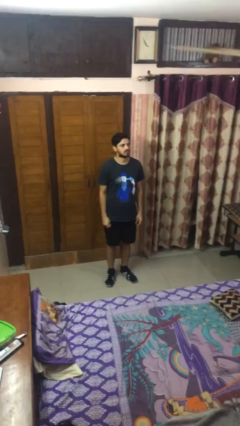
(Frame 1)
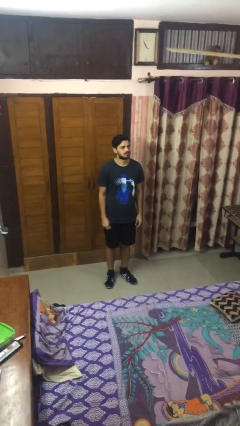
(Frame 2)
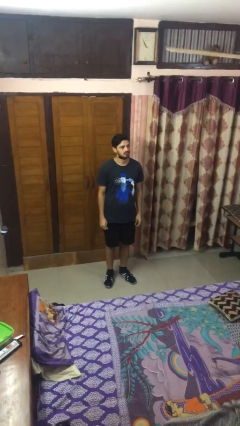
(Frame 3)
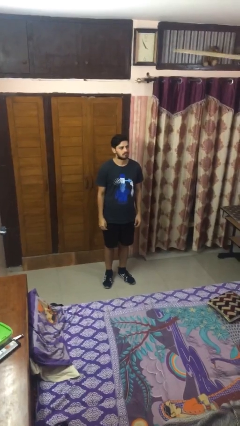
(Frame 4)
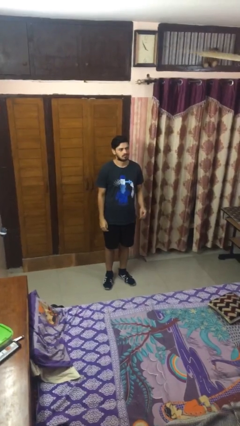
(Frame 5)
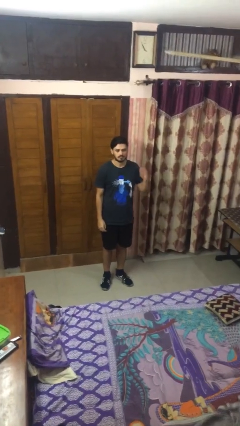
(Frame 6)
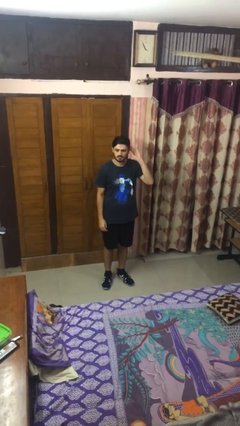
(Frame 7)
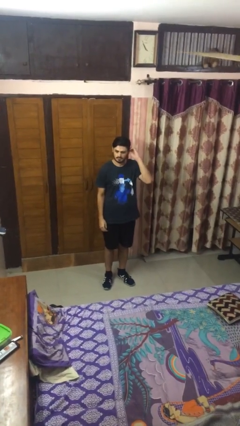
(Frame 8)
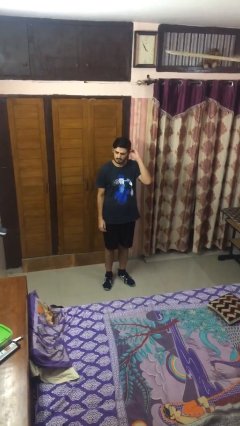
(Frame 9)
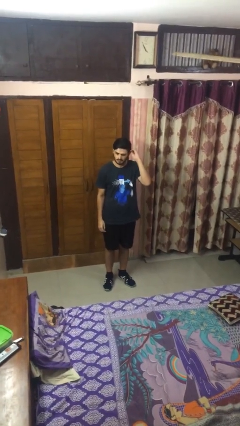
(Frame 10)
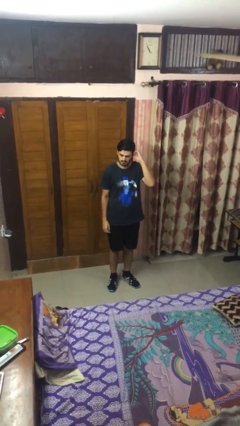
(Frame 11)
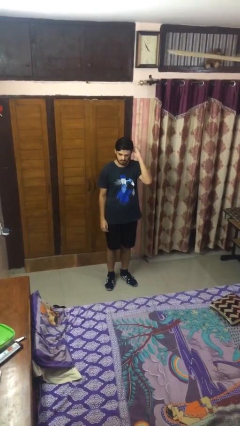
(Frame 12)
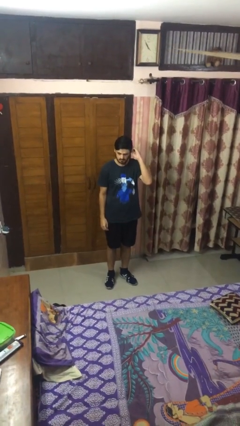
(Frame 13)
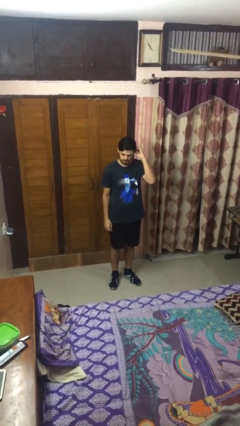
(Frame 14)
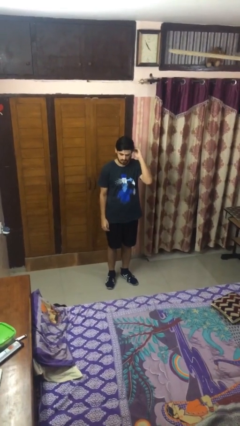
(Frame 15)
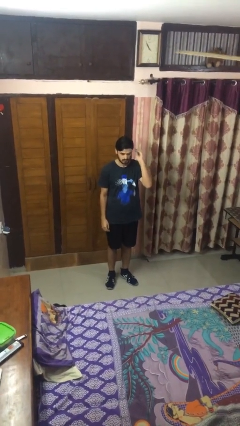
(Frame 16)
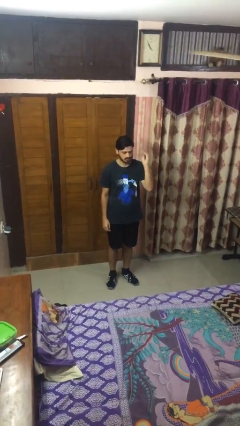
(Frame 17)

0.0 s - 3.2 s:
person touches earlobe

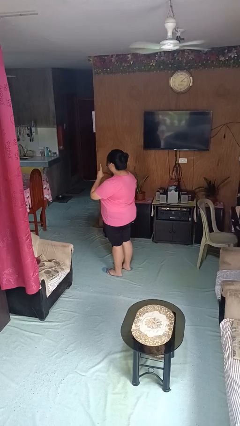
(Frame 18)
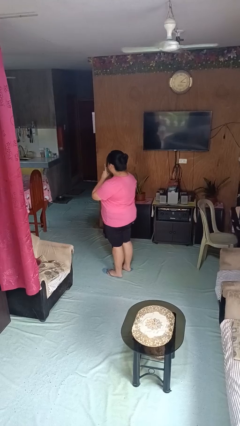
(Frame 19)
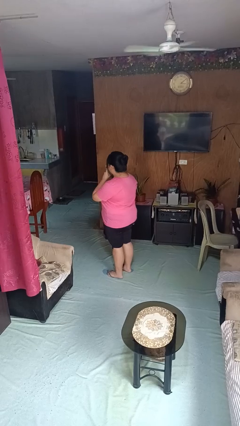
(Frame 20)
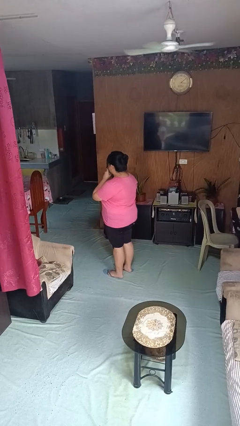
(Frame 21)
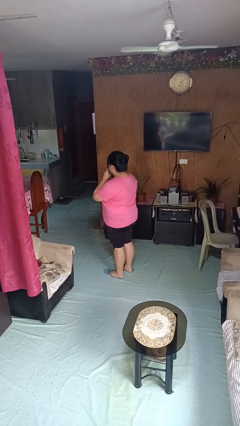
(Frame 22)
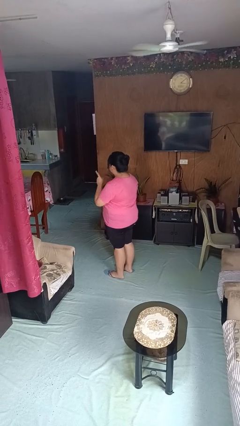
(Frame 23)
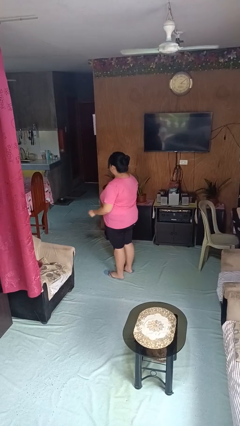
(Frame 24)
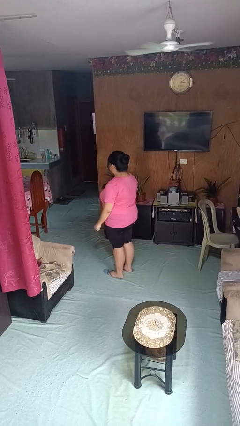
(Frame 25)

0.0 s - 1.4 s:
person gestures be quiet

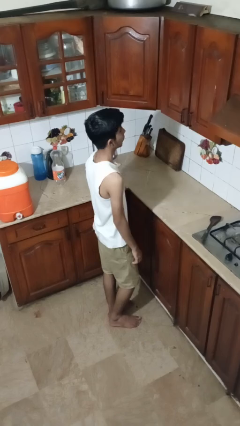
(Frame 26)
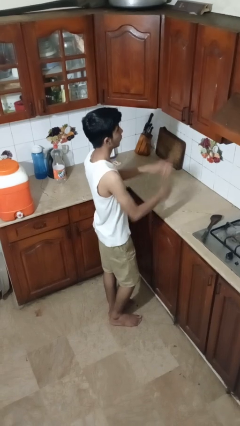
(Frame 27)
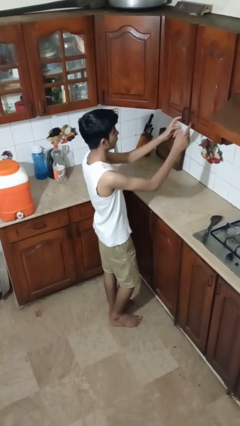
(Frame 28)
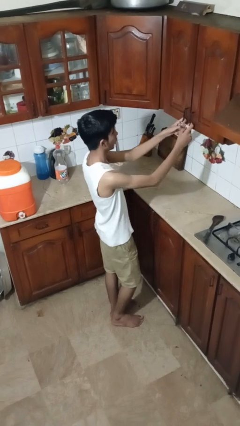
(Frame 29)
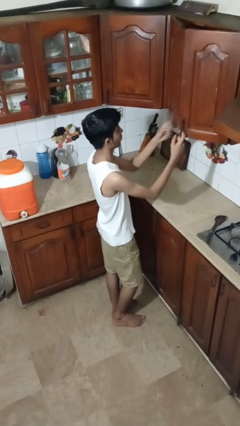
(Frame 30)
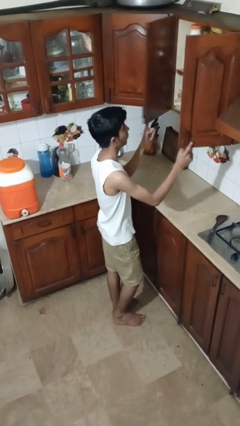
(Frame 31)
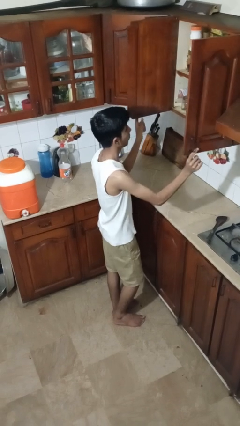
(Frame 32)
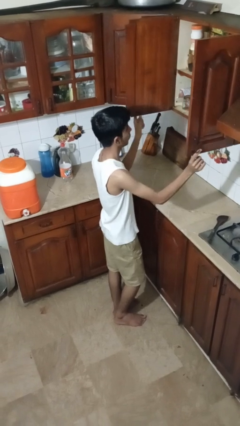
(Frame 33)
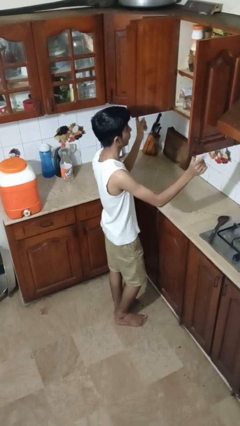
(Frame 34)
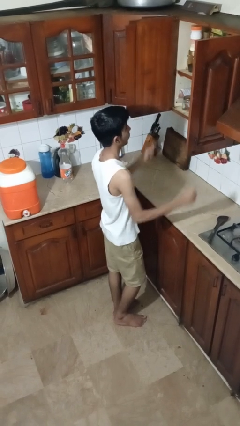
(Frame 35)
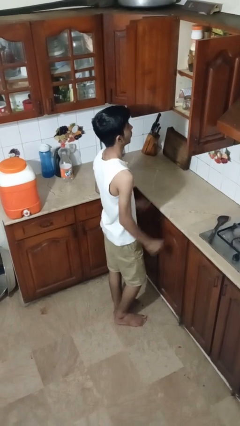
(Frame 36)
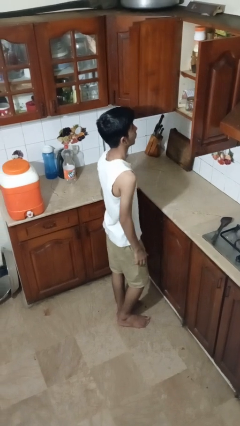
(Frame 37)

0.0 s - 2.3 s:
person opens cabinet

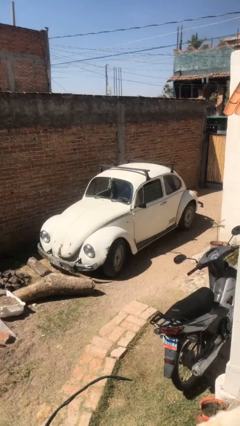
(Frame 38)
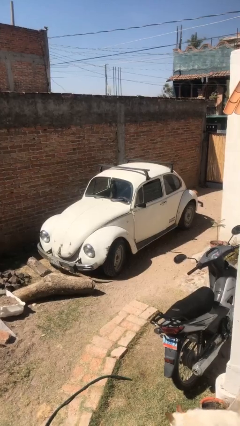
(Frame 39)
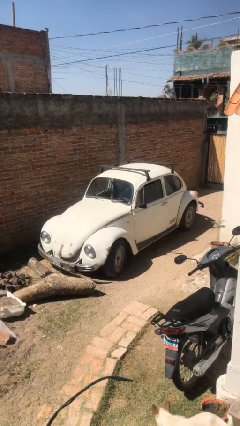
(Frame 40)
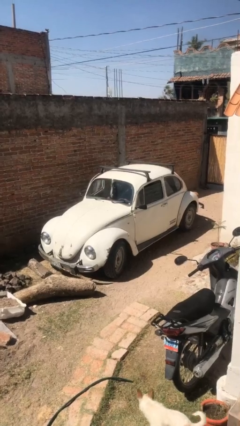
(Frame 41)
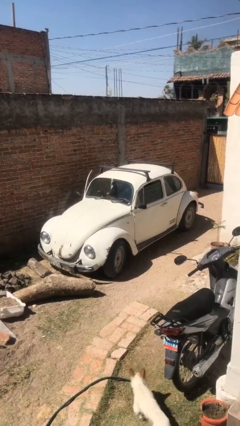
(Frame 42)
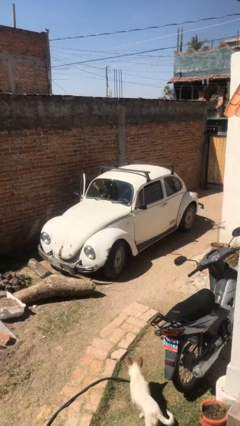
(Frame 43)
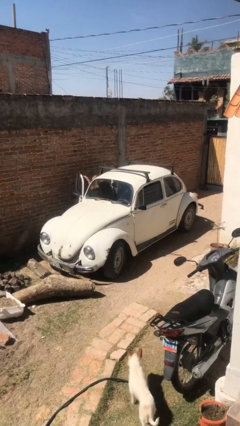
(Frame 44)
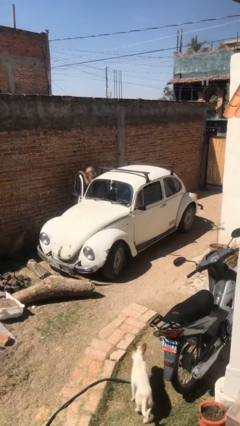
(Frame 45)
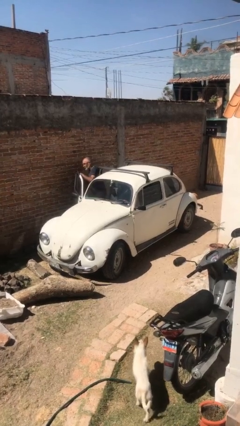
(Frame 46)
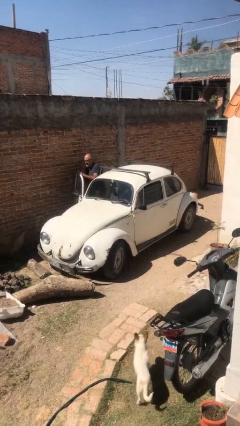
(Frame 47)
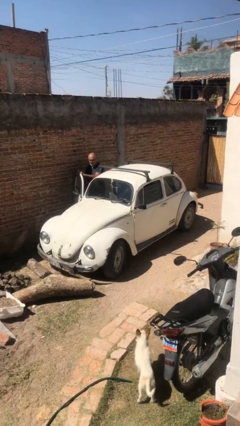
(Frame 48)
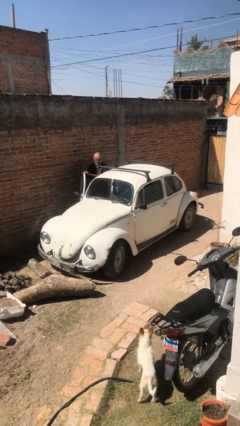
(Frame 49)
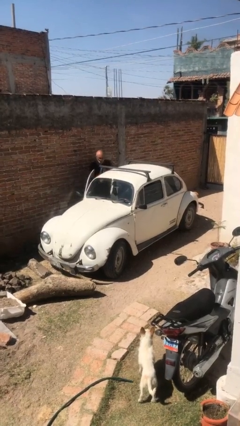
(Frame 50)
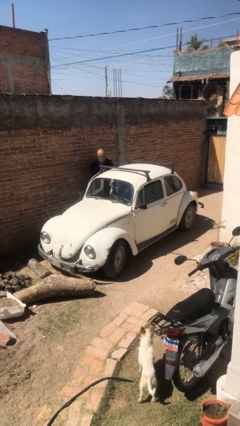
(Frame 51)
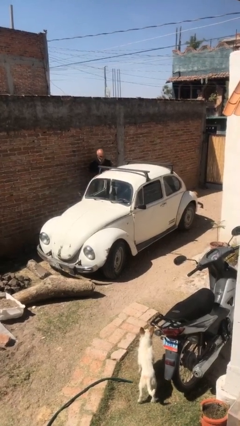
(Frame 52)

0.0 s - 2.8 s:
car drops off person

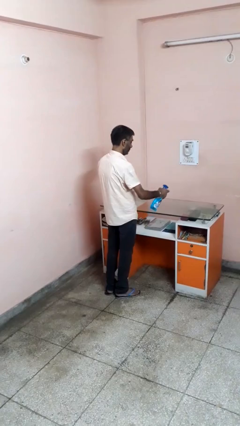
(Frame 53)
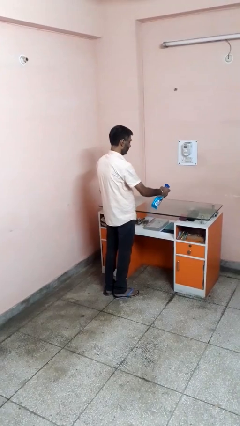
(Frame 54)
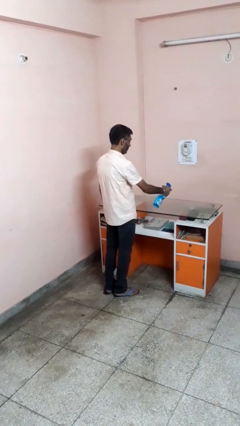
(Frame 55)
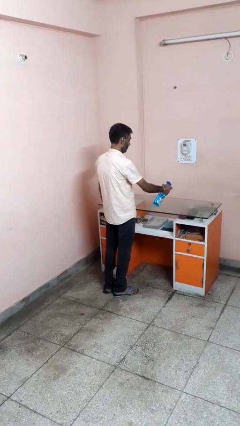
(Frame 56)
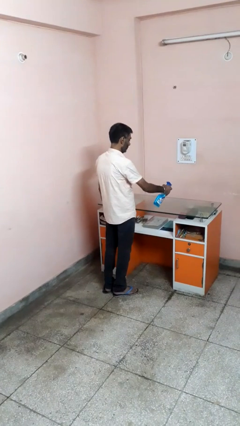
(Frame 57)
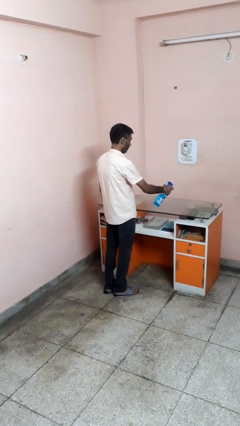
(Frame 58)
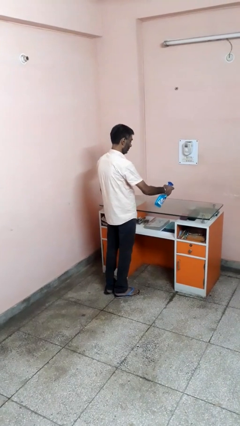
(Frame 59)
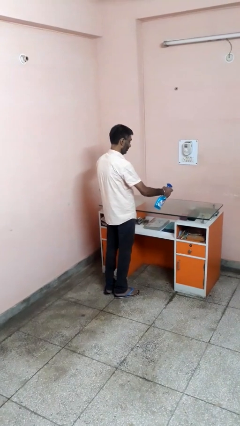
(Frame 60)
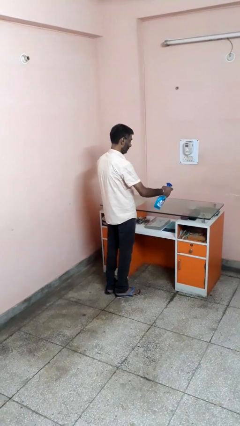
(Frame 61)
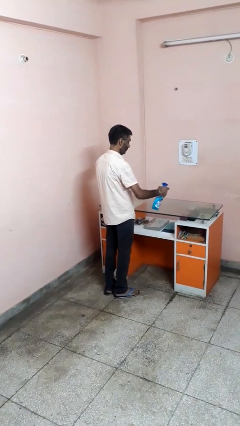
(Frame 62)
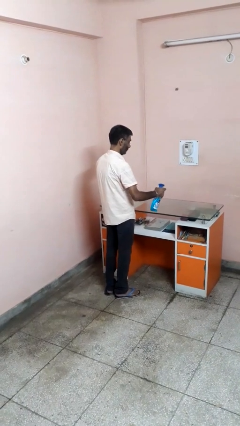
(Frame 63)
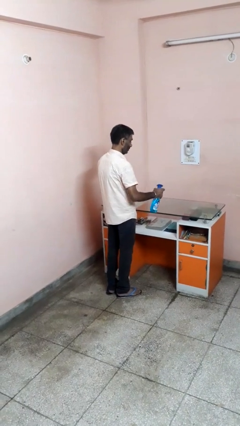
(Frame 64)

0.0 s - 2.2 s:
person sprays from bottle

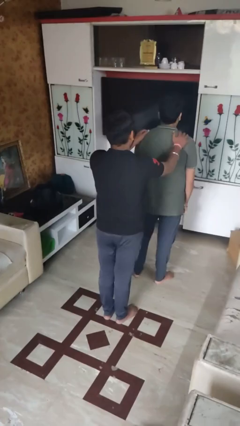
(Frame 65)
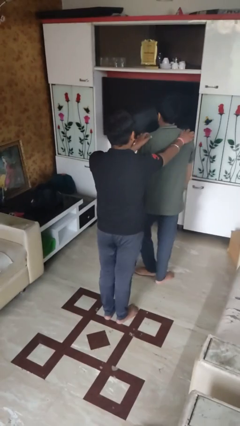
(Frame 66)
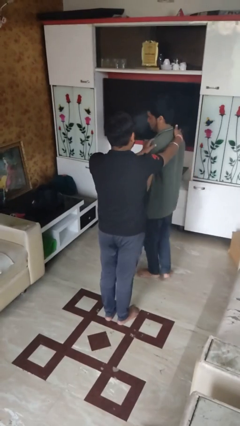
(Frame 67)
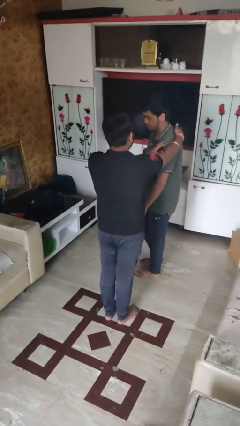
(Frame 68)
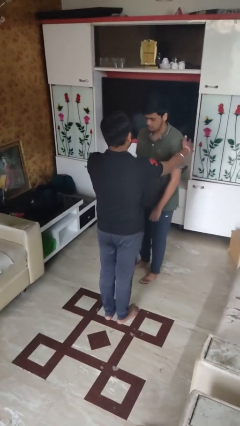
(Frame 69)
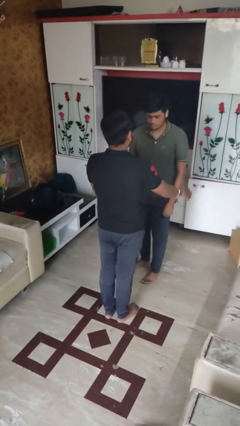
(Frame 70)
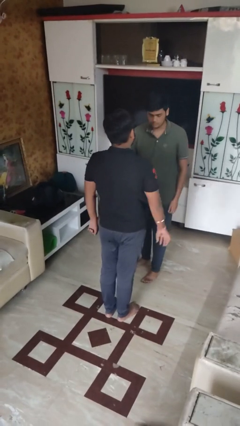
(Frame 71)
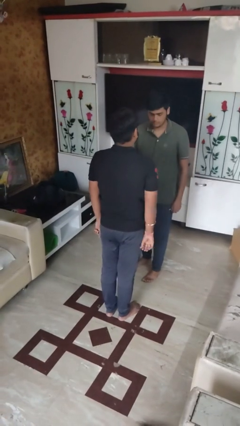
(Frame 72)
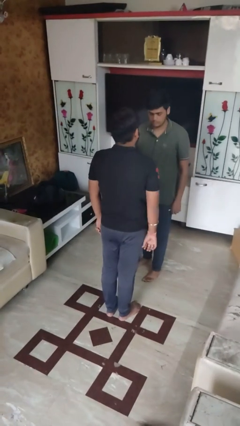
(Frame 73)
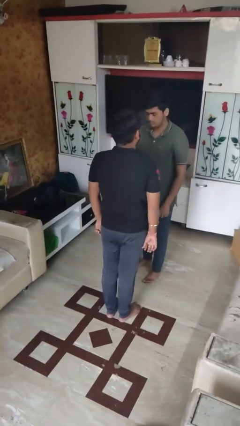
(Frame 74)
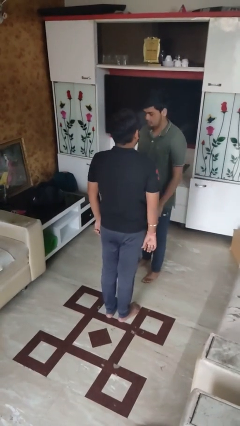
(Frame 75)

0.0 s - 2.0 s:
person spins person around

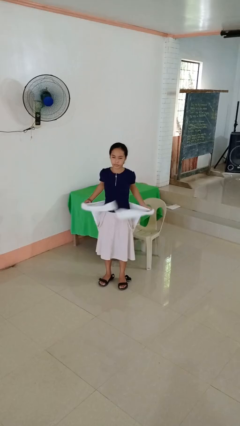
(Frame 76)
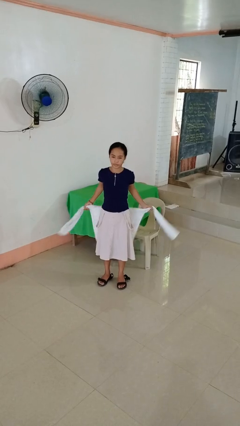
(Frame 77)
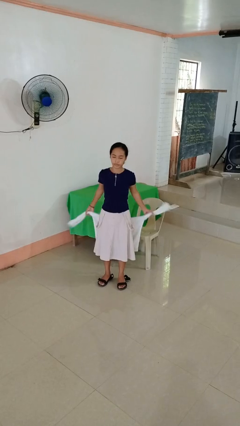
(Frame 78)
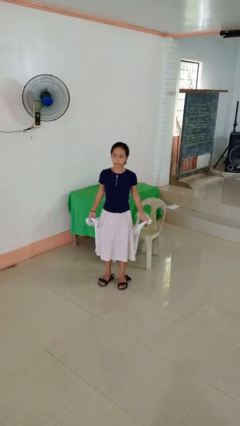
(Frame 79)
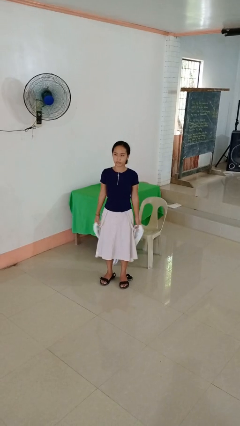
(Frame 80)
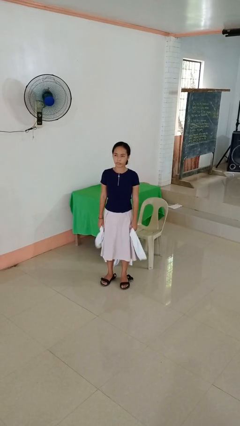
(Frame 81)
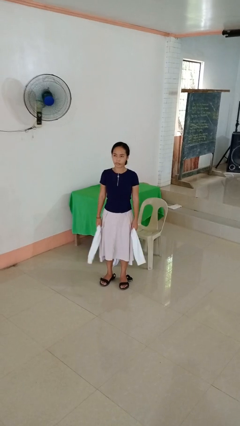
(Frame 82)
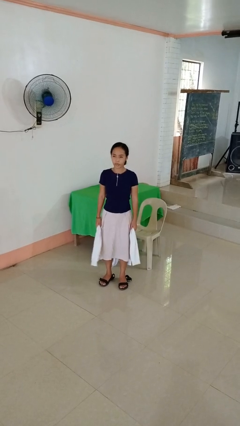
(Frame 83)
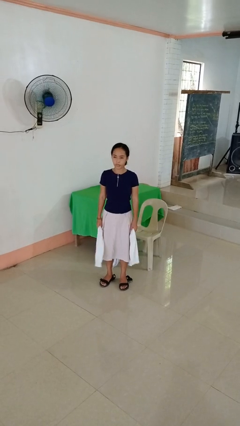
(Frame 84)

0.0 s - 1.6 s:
person unties jacket around waist

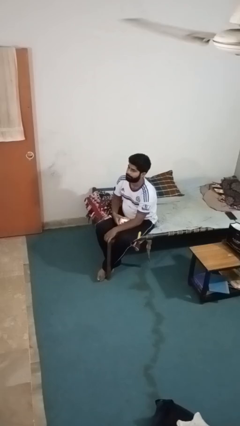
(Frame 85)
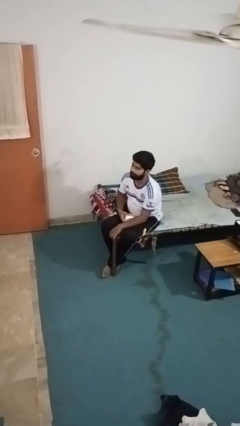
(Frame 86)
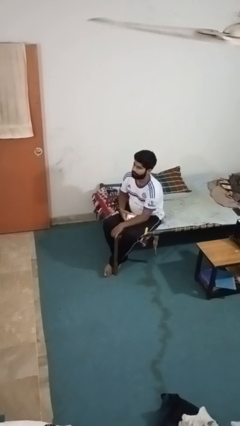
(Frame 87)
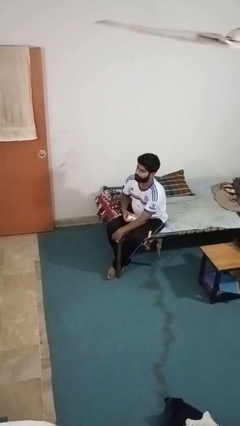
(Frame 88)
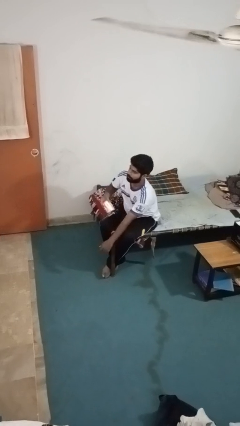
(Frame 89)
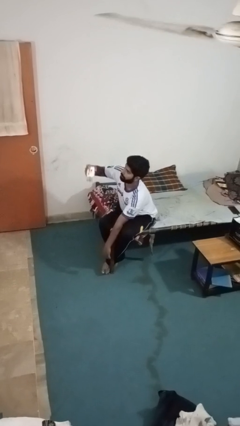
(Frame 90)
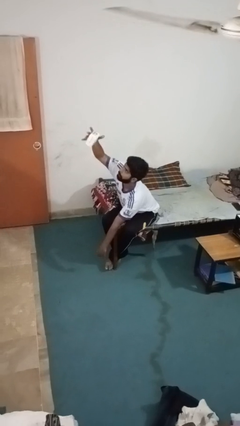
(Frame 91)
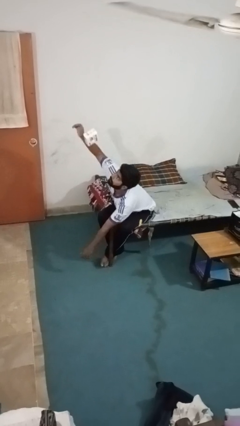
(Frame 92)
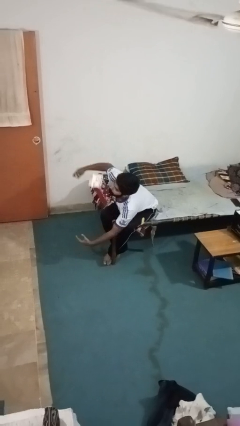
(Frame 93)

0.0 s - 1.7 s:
person drops object
